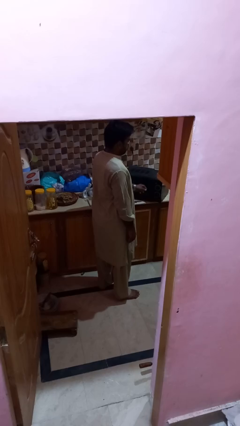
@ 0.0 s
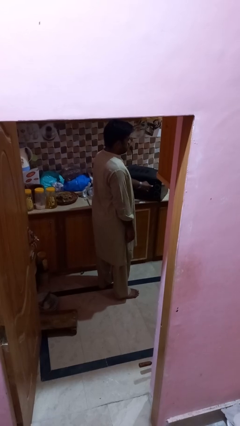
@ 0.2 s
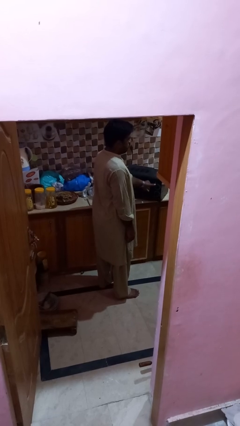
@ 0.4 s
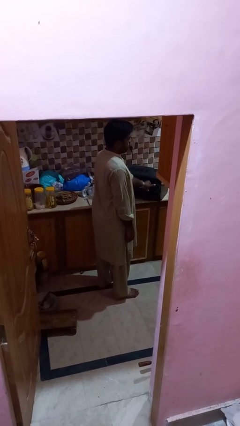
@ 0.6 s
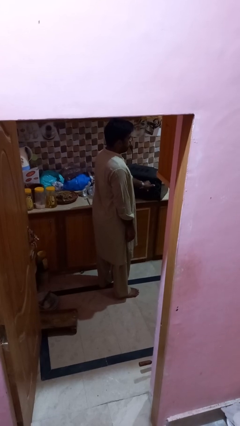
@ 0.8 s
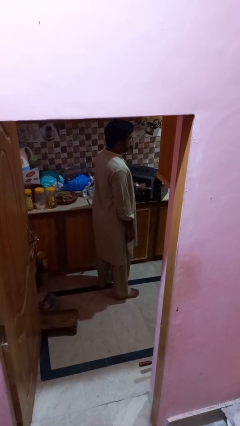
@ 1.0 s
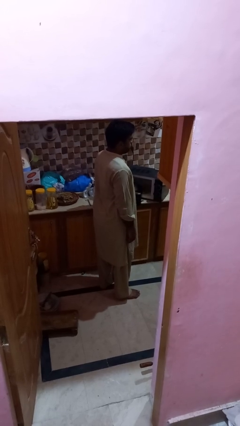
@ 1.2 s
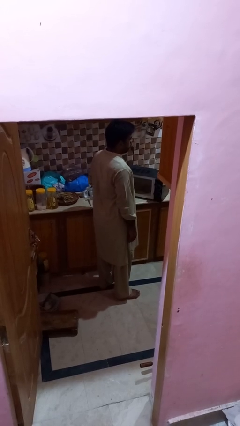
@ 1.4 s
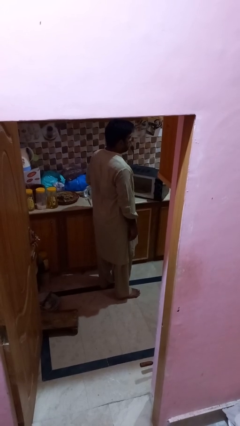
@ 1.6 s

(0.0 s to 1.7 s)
person opens microwave

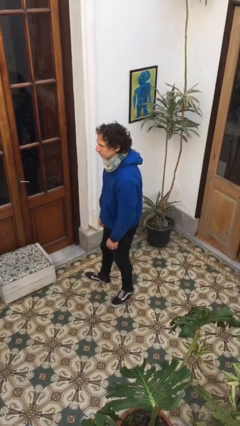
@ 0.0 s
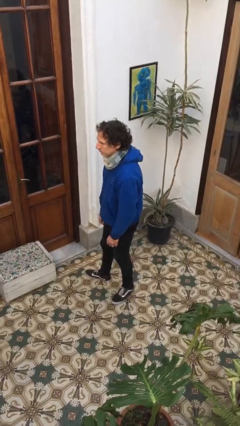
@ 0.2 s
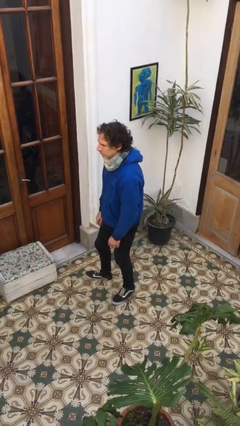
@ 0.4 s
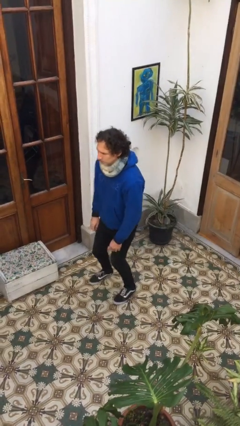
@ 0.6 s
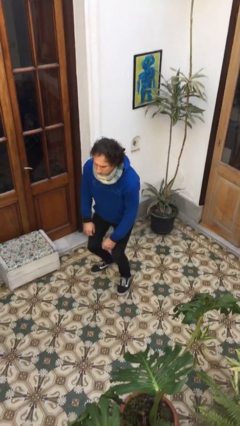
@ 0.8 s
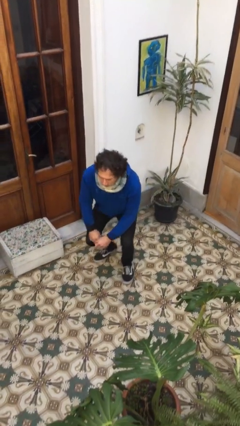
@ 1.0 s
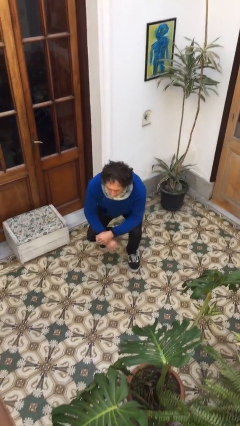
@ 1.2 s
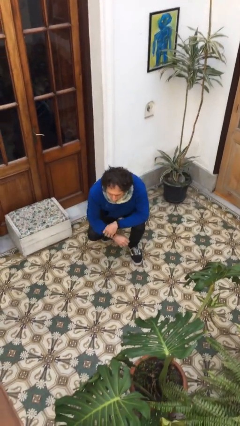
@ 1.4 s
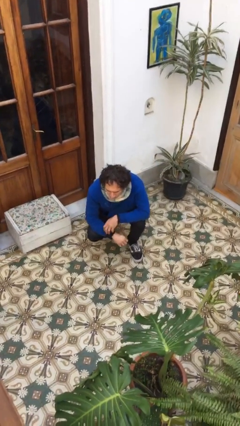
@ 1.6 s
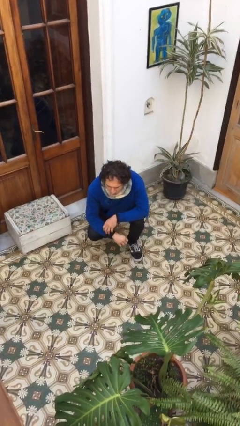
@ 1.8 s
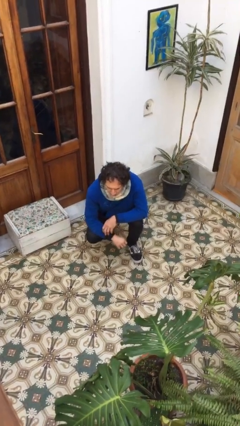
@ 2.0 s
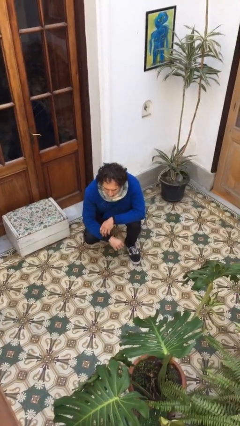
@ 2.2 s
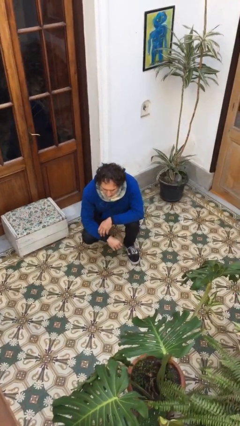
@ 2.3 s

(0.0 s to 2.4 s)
person squats

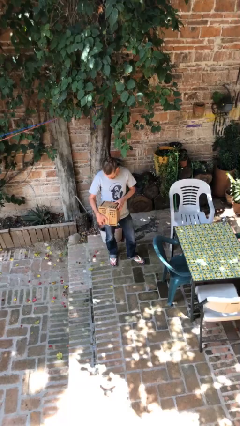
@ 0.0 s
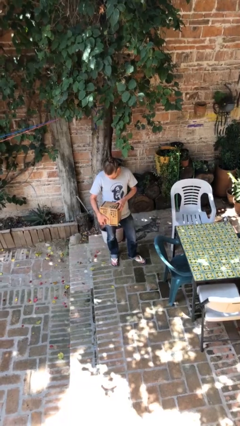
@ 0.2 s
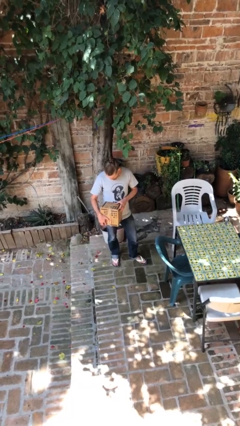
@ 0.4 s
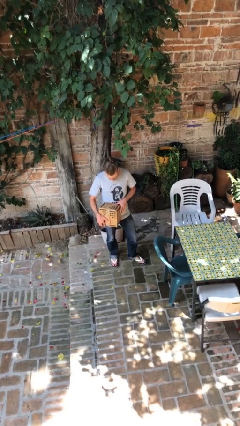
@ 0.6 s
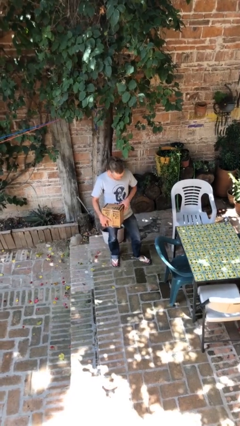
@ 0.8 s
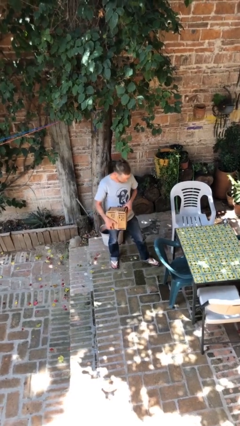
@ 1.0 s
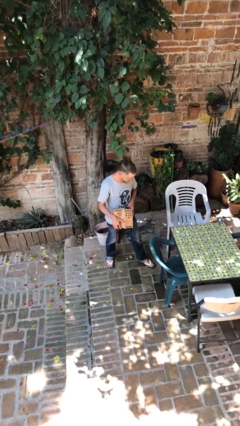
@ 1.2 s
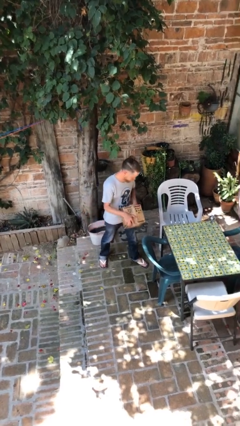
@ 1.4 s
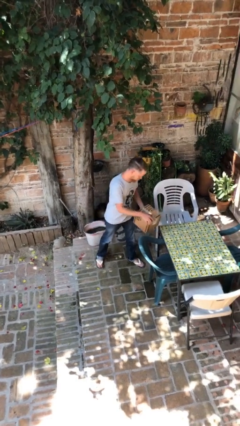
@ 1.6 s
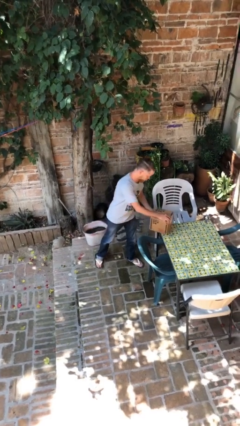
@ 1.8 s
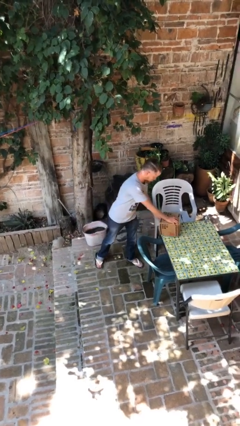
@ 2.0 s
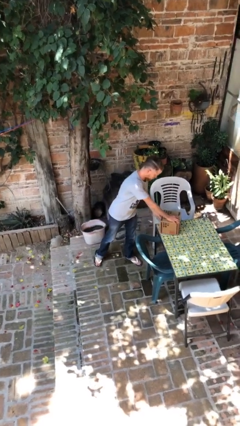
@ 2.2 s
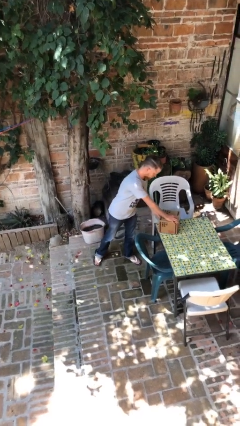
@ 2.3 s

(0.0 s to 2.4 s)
person puts down object on table

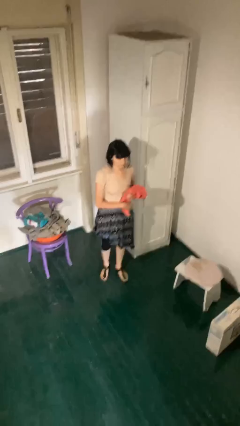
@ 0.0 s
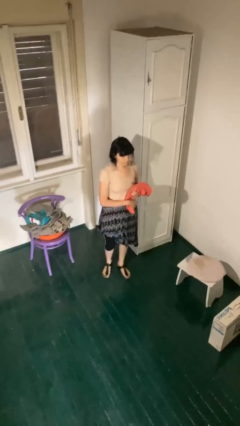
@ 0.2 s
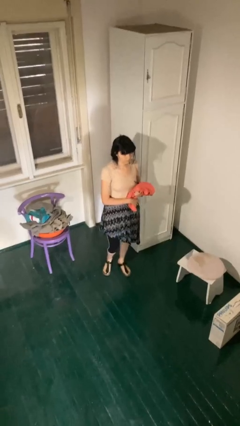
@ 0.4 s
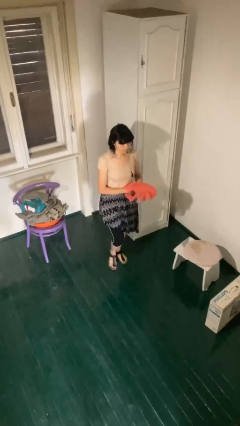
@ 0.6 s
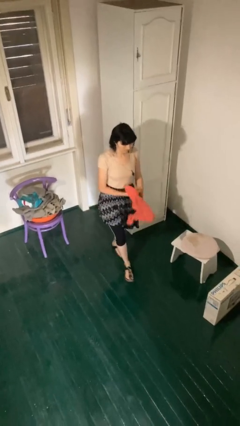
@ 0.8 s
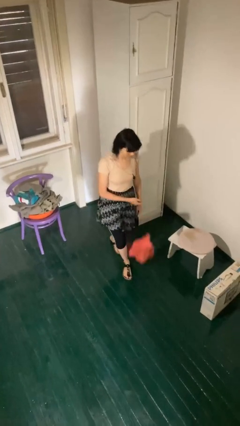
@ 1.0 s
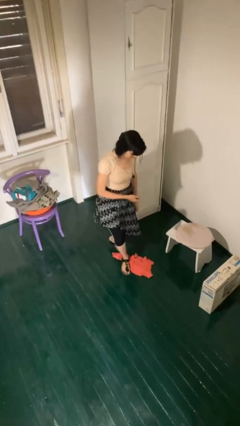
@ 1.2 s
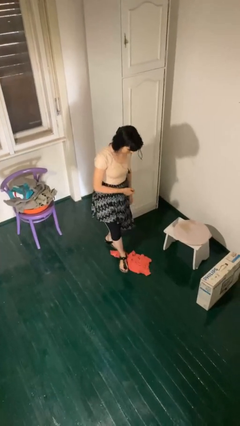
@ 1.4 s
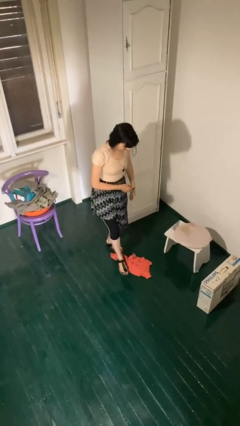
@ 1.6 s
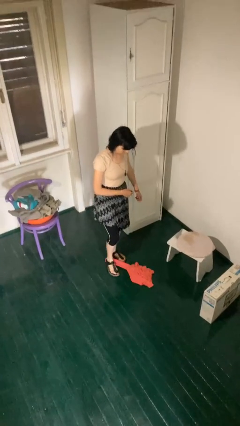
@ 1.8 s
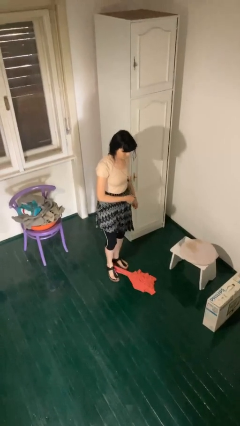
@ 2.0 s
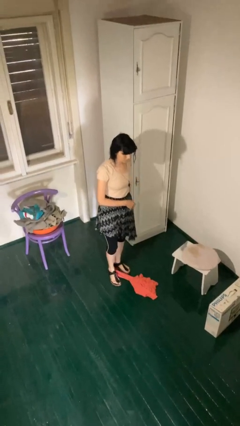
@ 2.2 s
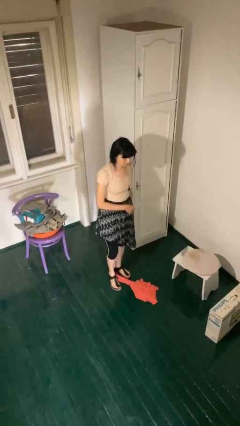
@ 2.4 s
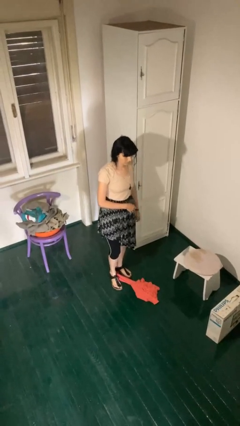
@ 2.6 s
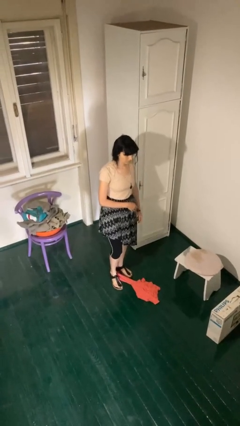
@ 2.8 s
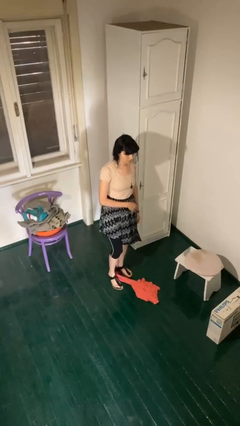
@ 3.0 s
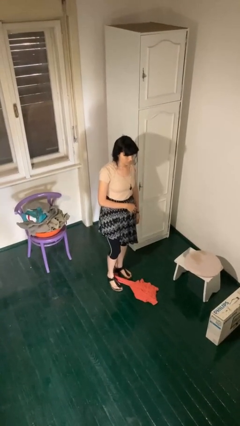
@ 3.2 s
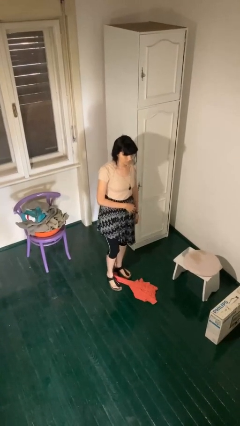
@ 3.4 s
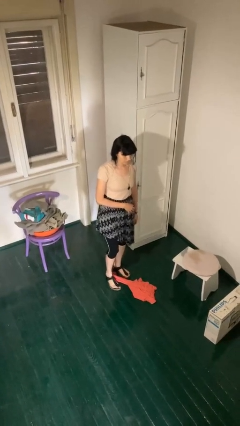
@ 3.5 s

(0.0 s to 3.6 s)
person drops object

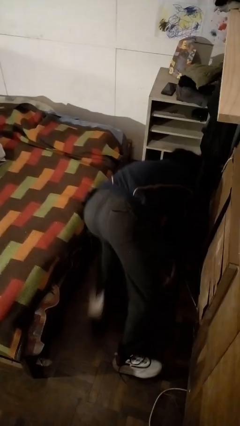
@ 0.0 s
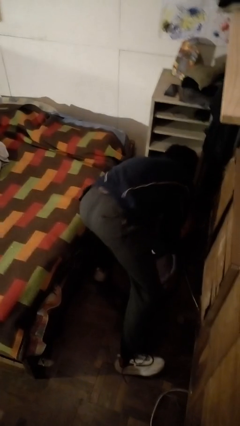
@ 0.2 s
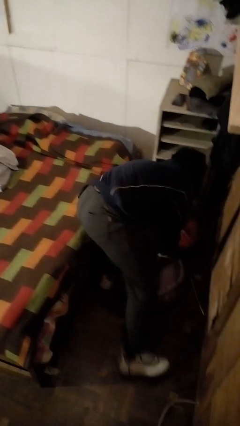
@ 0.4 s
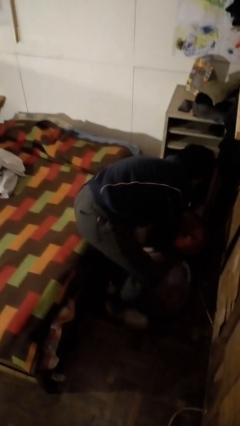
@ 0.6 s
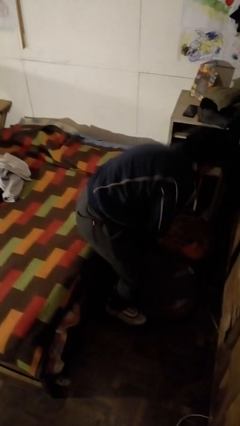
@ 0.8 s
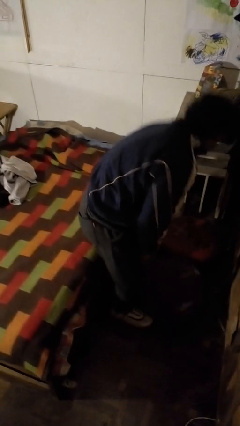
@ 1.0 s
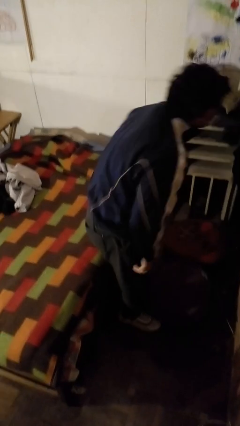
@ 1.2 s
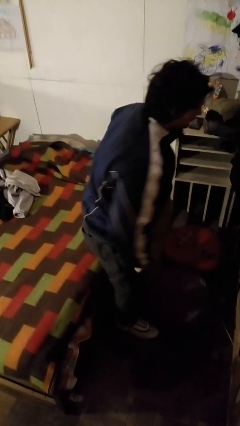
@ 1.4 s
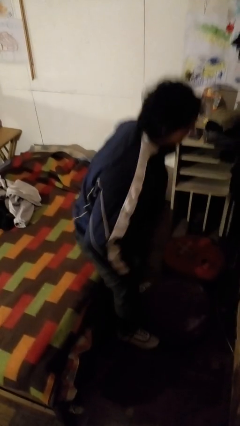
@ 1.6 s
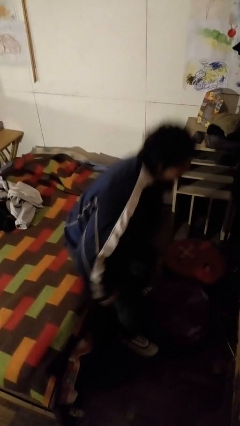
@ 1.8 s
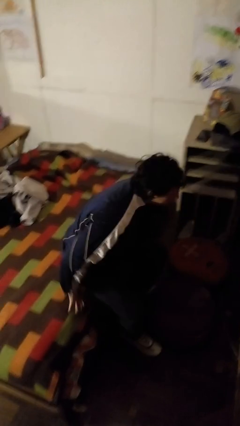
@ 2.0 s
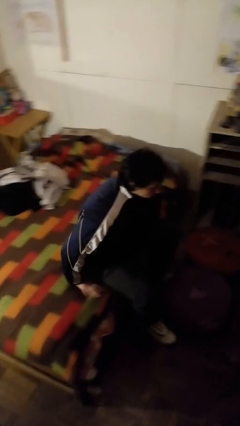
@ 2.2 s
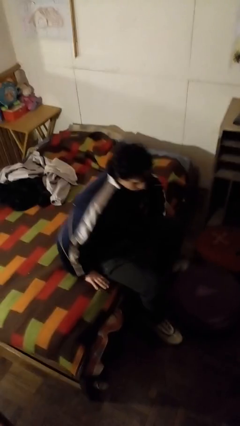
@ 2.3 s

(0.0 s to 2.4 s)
person stands up from floor

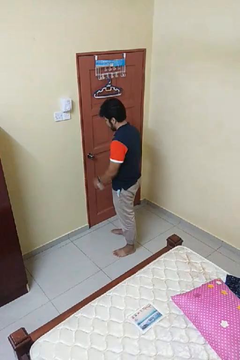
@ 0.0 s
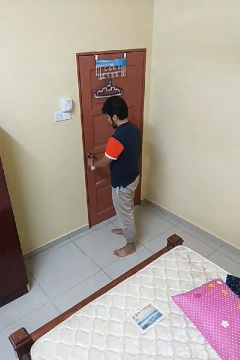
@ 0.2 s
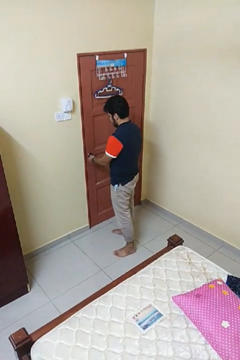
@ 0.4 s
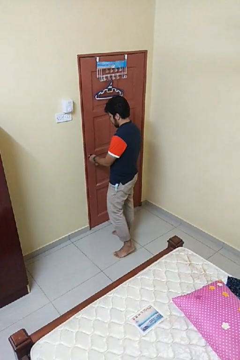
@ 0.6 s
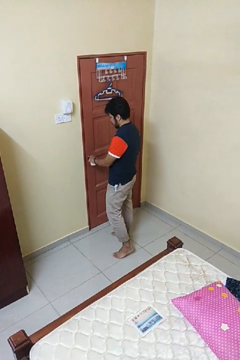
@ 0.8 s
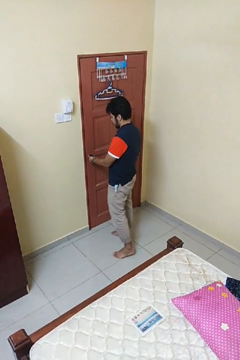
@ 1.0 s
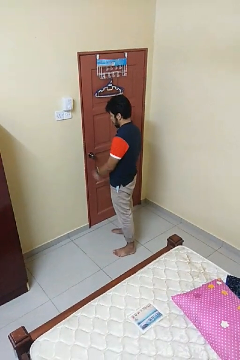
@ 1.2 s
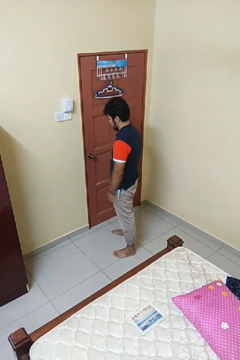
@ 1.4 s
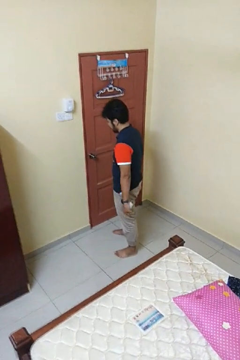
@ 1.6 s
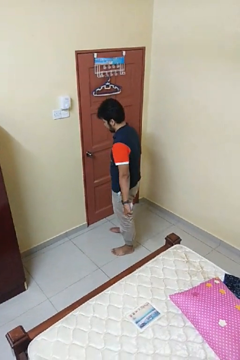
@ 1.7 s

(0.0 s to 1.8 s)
person unlocks door with keys

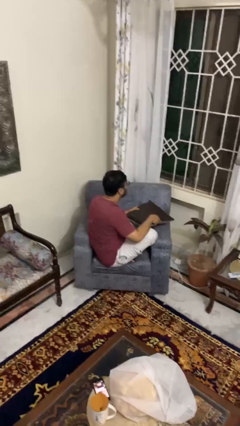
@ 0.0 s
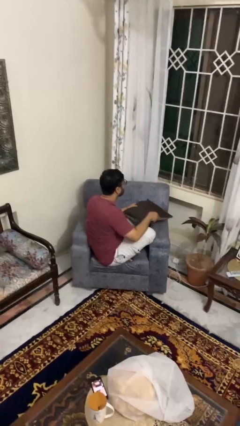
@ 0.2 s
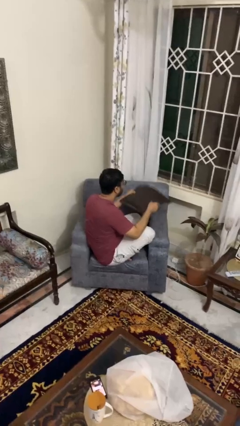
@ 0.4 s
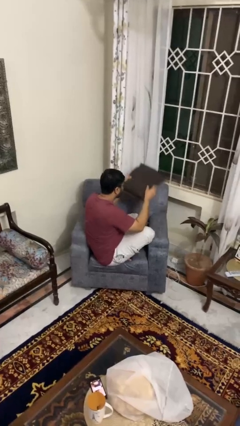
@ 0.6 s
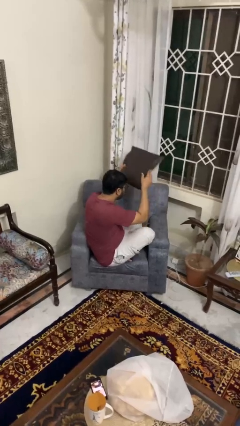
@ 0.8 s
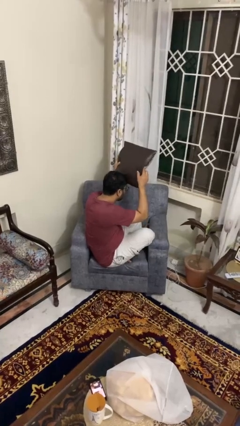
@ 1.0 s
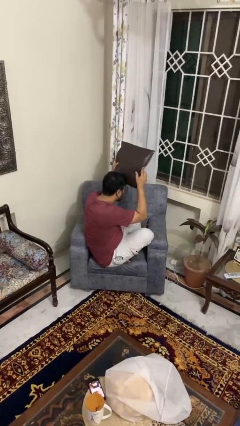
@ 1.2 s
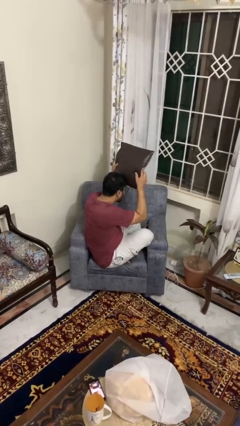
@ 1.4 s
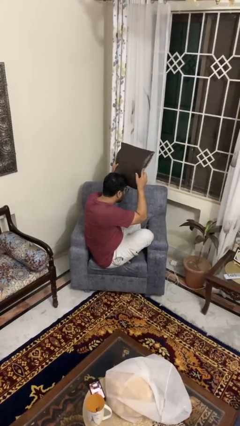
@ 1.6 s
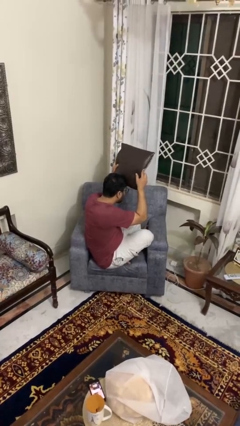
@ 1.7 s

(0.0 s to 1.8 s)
person holds object above head

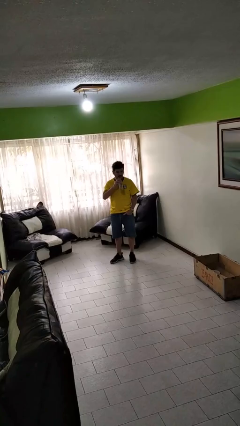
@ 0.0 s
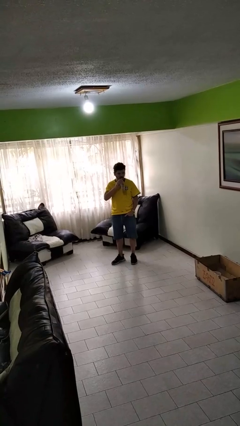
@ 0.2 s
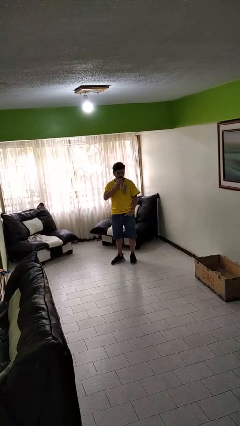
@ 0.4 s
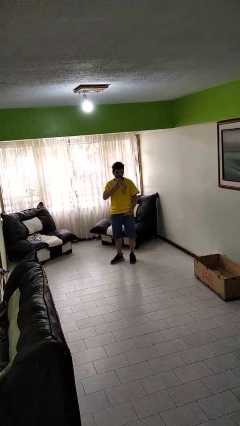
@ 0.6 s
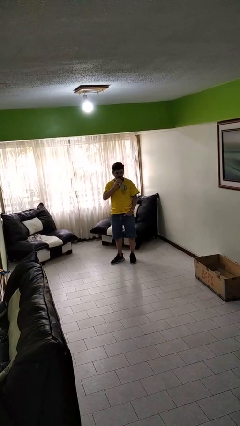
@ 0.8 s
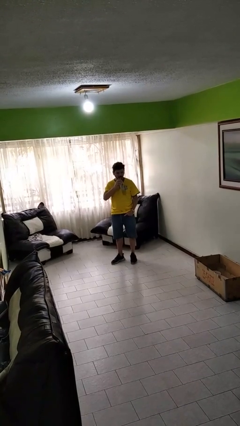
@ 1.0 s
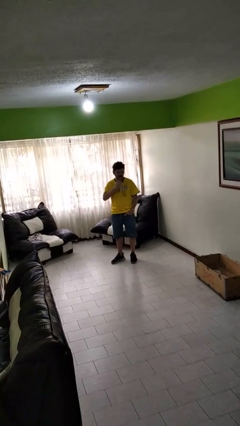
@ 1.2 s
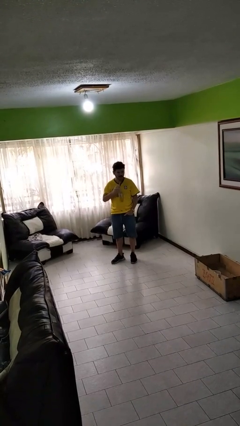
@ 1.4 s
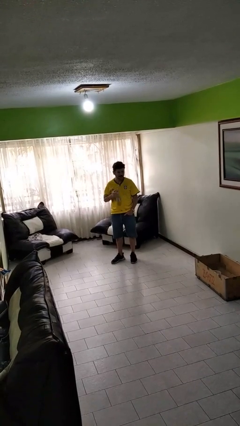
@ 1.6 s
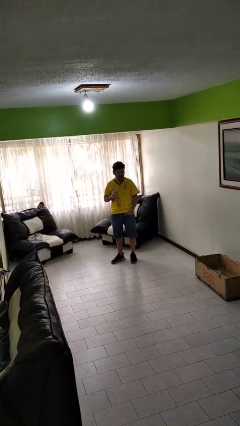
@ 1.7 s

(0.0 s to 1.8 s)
person drinks from straw
